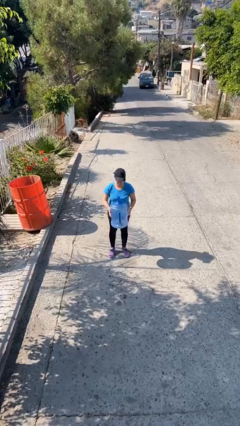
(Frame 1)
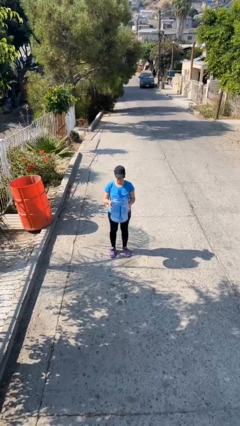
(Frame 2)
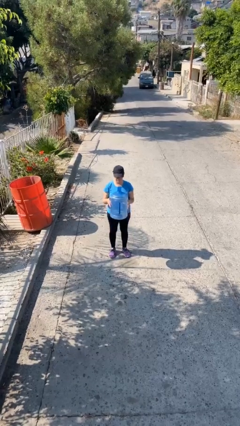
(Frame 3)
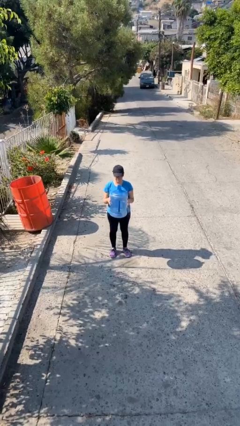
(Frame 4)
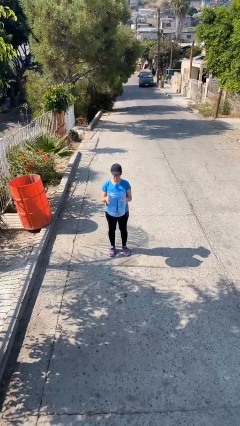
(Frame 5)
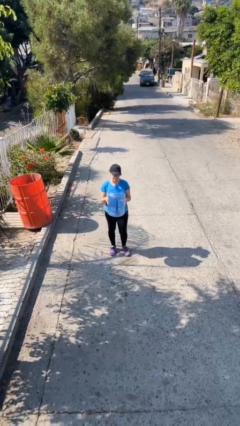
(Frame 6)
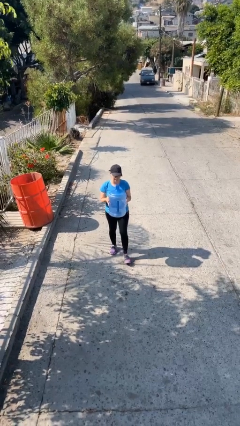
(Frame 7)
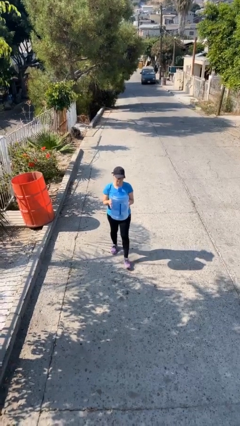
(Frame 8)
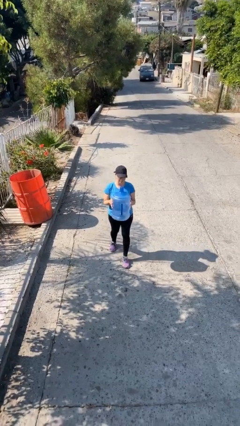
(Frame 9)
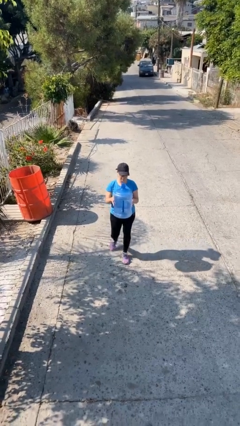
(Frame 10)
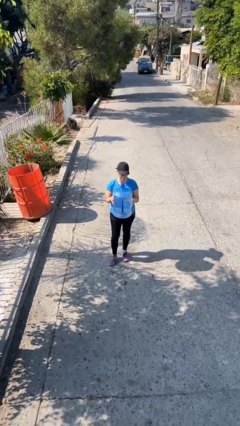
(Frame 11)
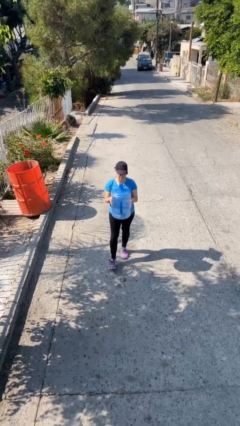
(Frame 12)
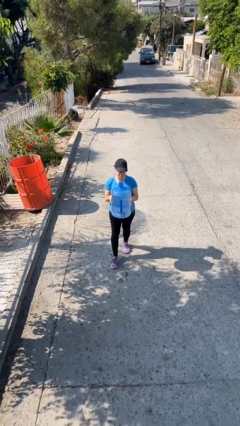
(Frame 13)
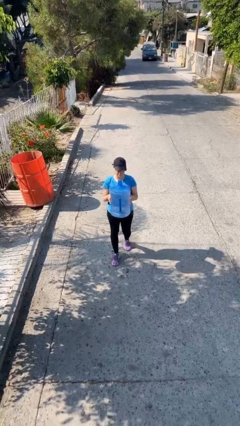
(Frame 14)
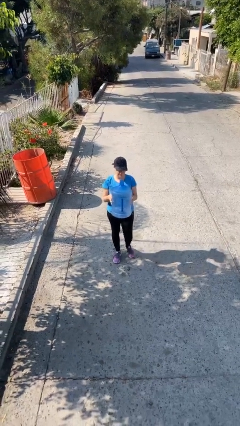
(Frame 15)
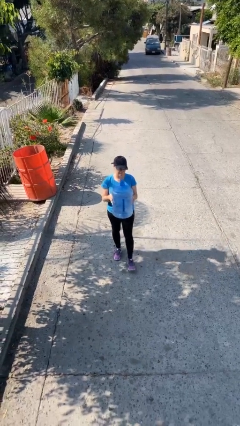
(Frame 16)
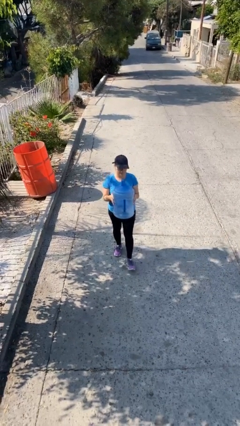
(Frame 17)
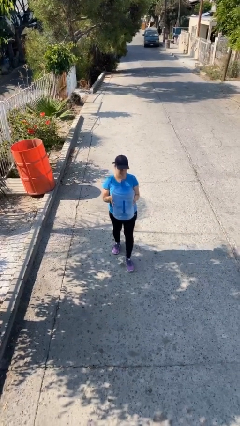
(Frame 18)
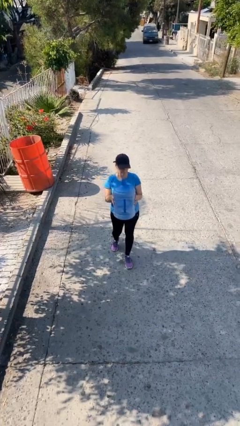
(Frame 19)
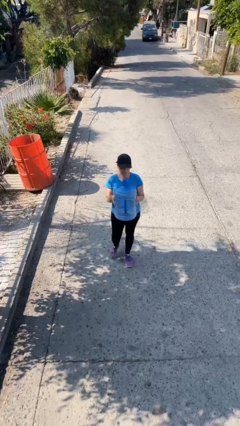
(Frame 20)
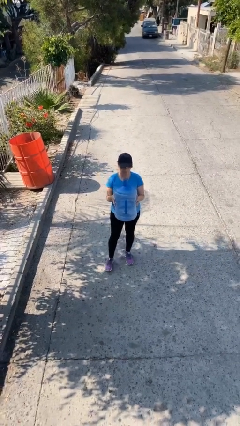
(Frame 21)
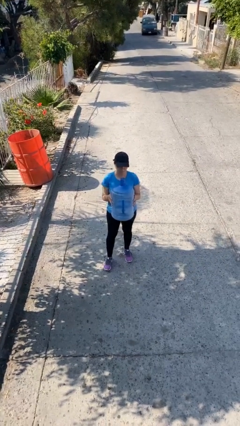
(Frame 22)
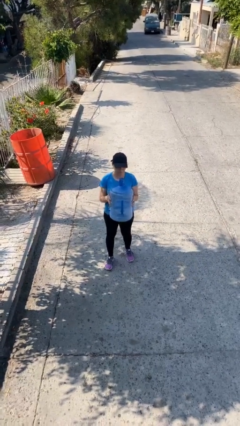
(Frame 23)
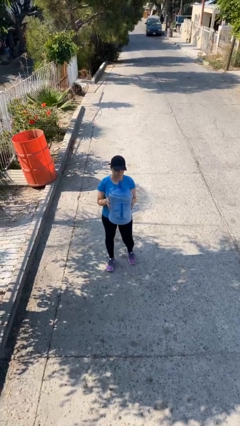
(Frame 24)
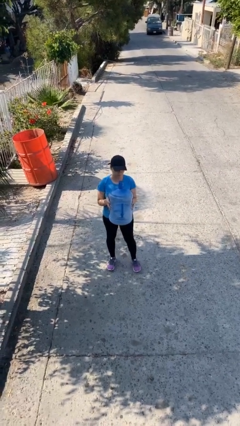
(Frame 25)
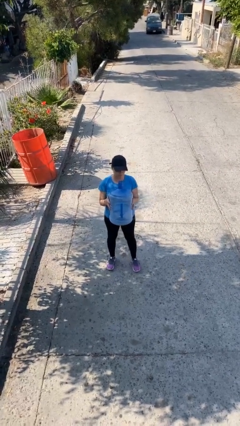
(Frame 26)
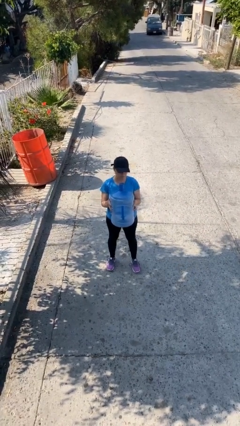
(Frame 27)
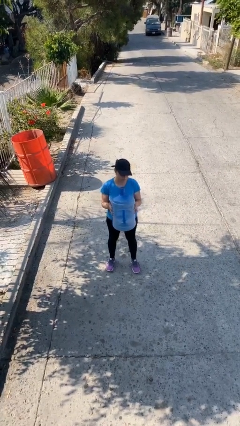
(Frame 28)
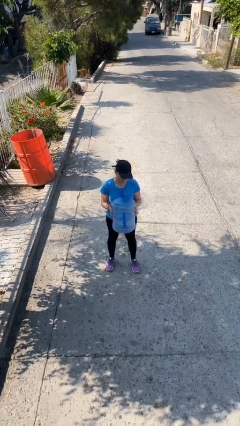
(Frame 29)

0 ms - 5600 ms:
person carries heavy object

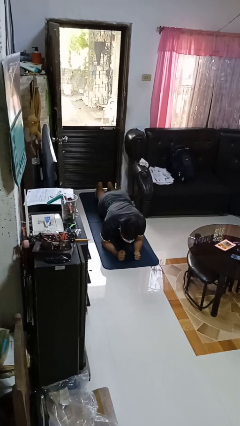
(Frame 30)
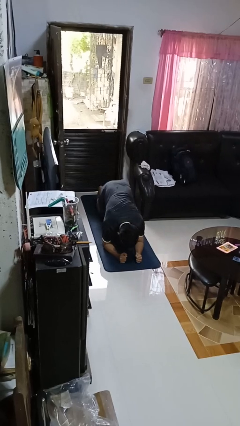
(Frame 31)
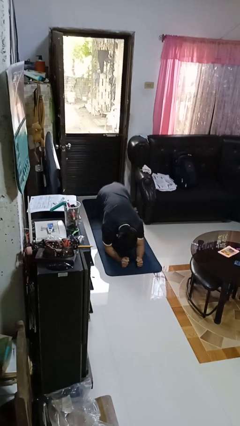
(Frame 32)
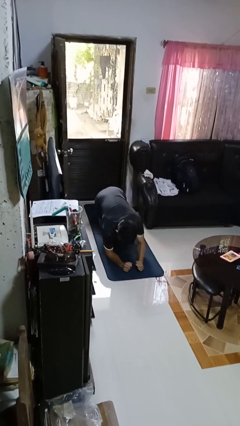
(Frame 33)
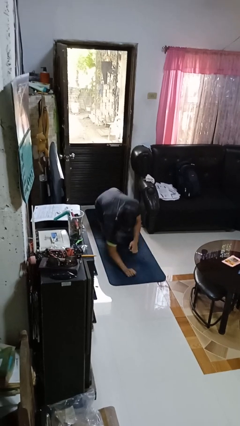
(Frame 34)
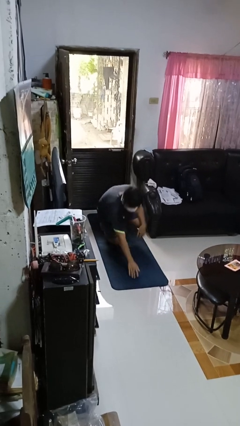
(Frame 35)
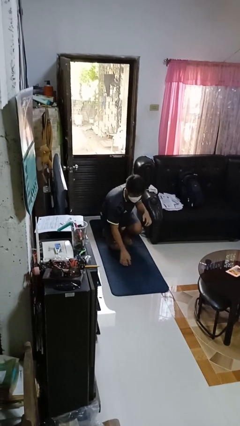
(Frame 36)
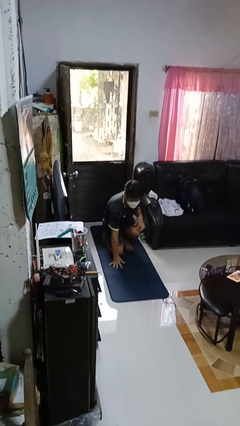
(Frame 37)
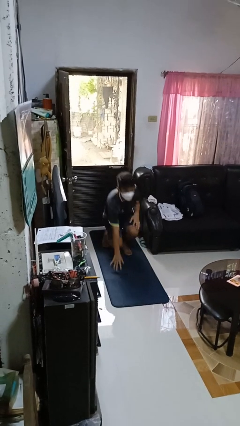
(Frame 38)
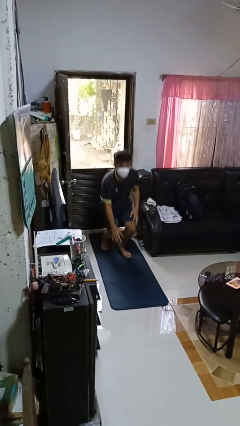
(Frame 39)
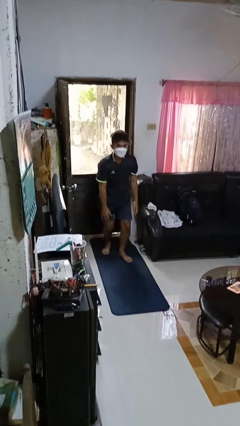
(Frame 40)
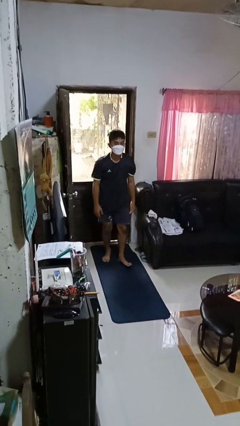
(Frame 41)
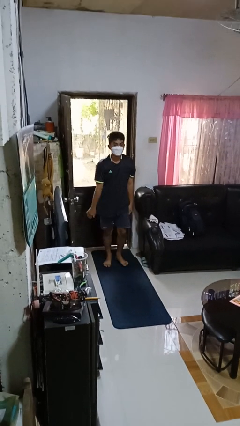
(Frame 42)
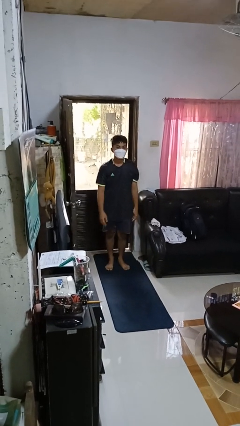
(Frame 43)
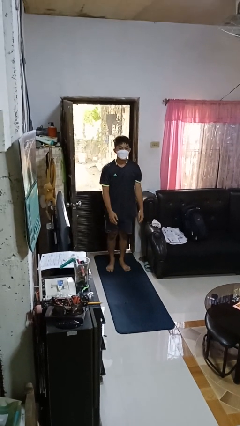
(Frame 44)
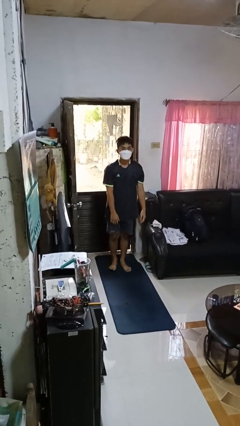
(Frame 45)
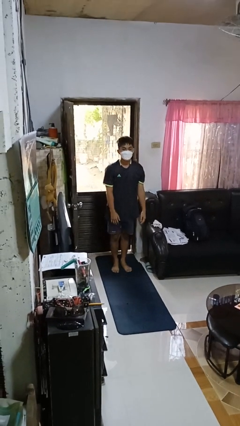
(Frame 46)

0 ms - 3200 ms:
person stands up from floor

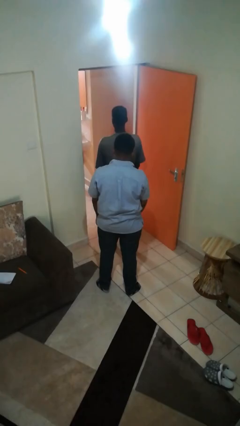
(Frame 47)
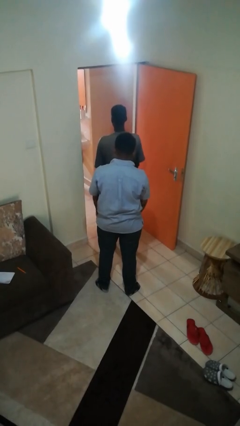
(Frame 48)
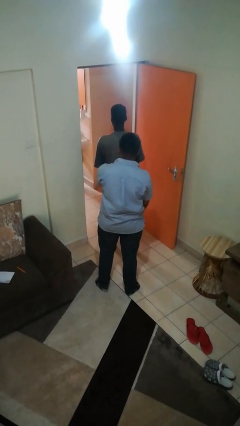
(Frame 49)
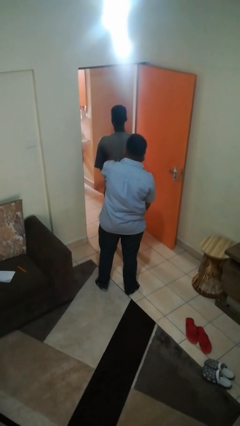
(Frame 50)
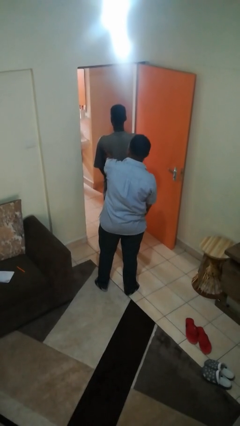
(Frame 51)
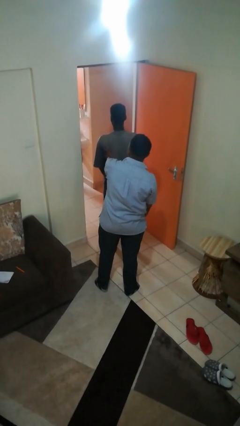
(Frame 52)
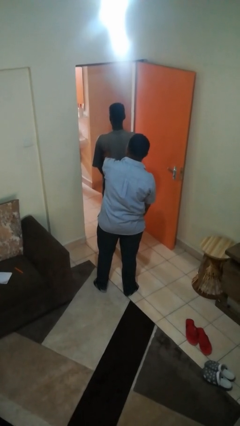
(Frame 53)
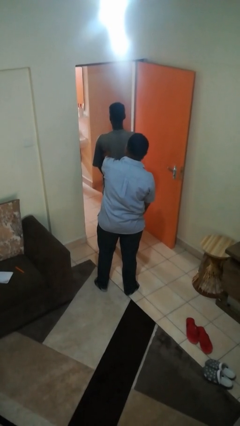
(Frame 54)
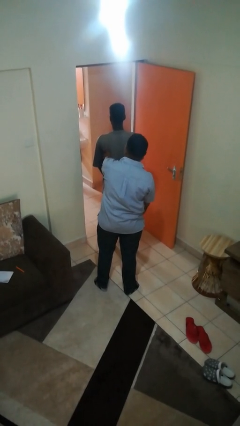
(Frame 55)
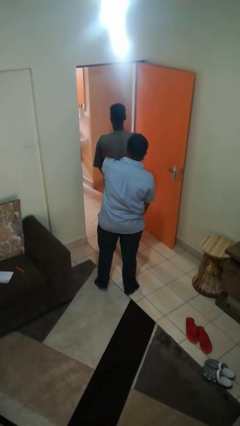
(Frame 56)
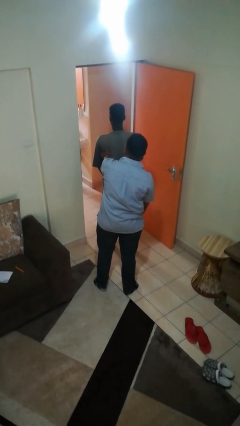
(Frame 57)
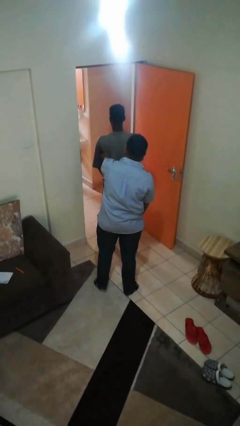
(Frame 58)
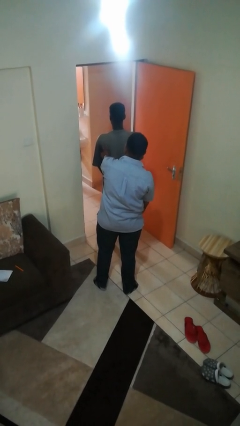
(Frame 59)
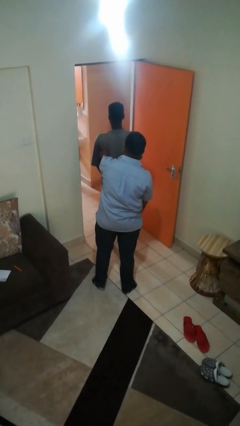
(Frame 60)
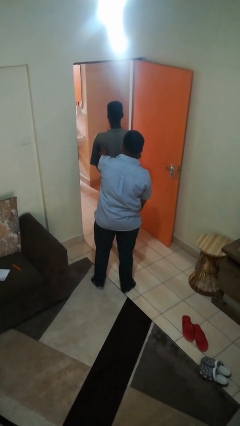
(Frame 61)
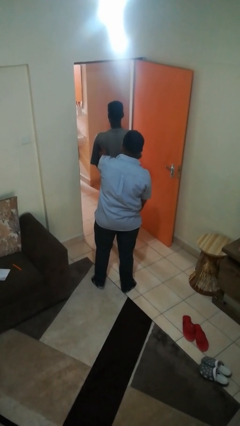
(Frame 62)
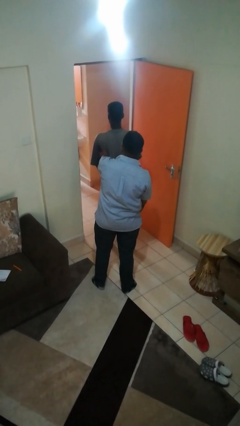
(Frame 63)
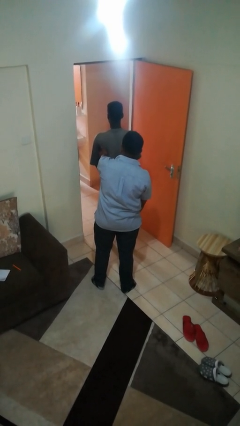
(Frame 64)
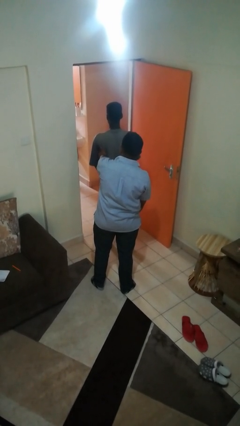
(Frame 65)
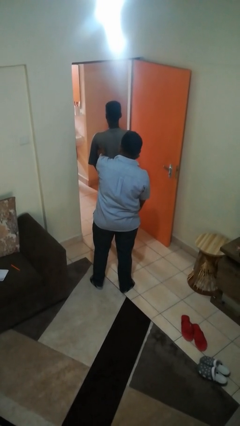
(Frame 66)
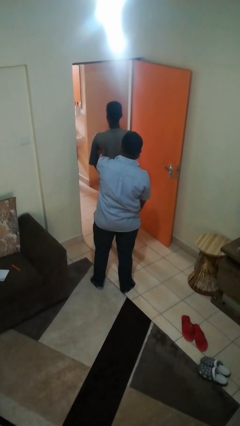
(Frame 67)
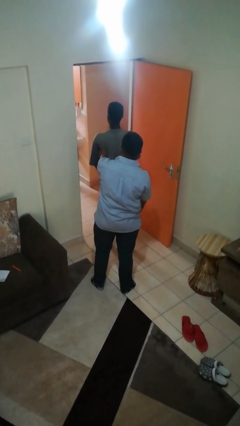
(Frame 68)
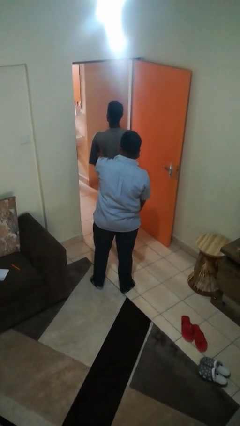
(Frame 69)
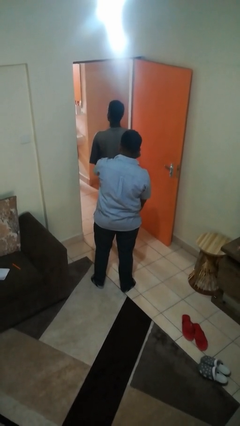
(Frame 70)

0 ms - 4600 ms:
person touches back of person

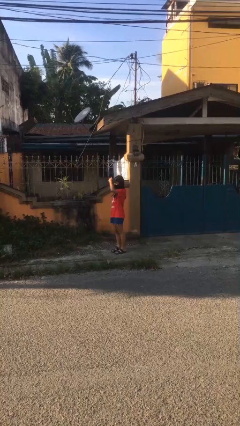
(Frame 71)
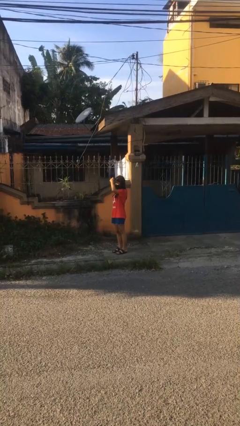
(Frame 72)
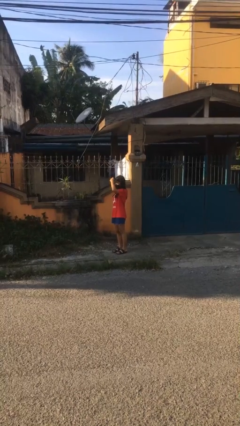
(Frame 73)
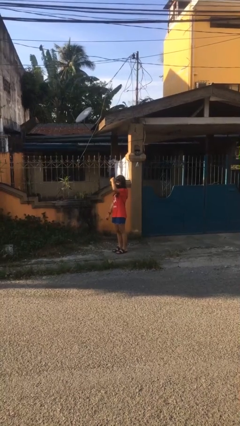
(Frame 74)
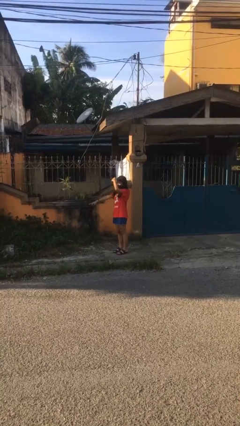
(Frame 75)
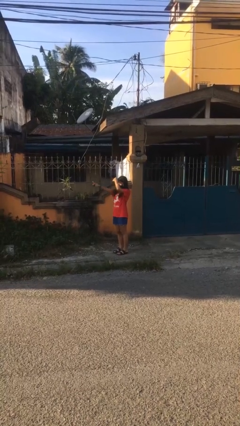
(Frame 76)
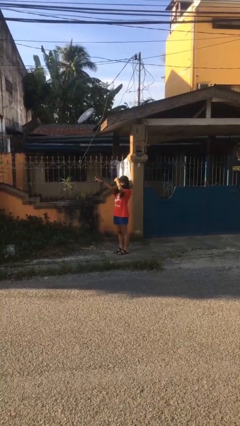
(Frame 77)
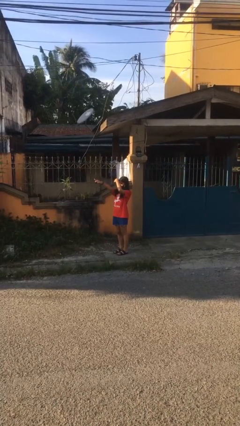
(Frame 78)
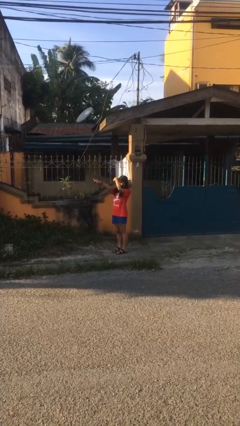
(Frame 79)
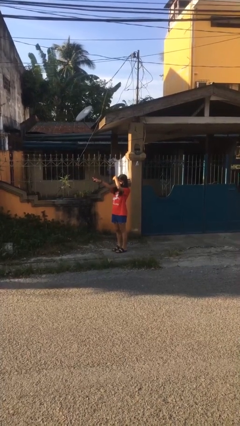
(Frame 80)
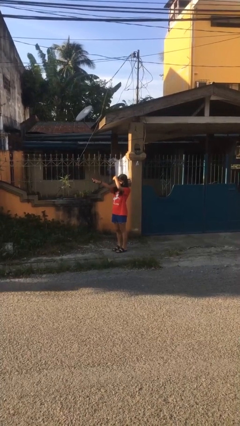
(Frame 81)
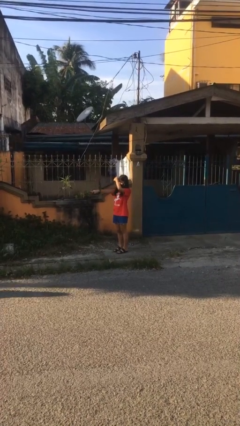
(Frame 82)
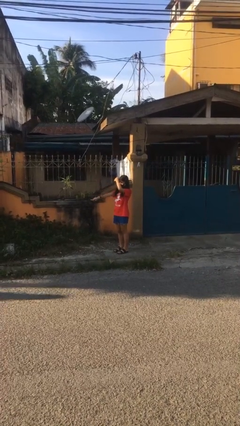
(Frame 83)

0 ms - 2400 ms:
person points at person

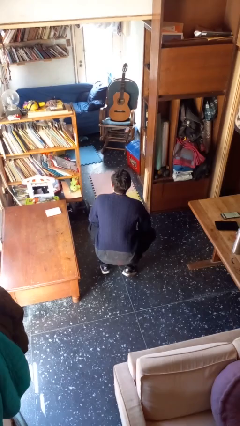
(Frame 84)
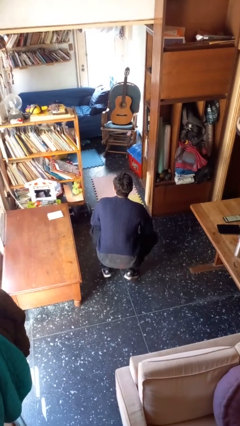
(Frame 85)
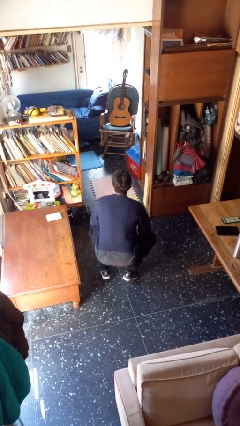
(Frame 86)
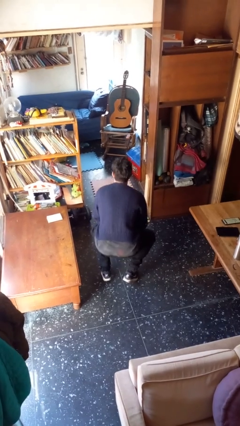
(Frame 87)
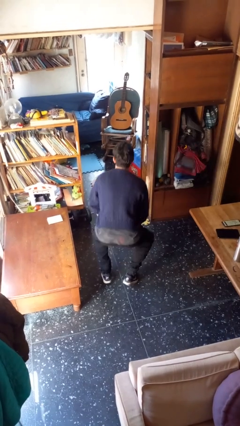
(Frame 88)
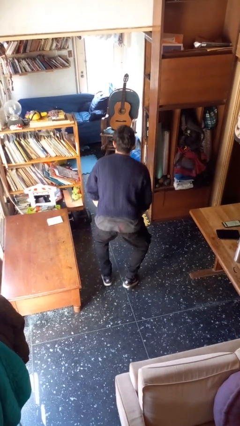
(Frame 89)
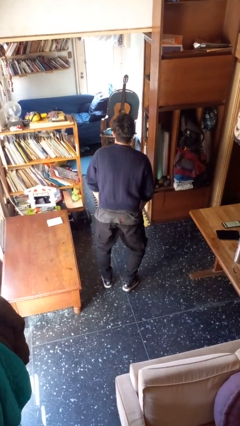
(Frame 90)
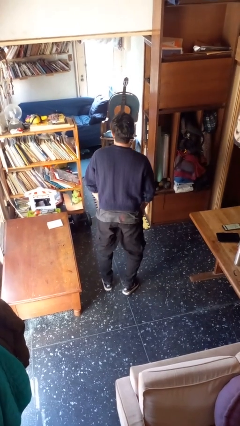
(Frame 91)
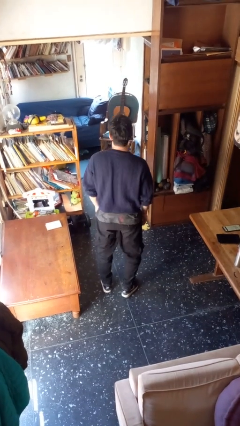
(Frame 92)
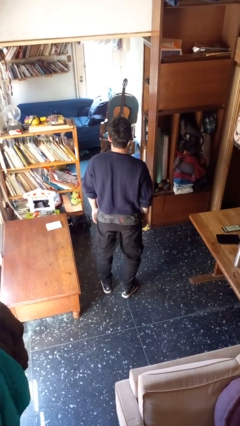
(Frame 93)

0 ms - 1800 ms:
person stands up

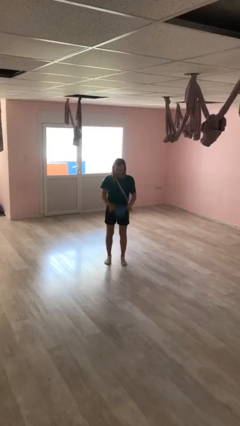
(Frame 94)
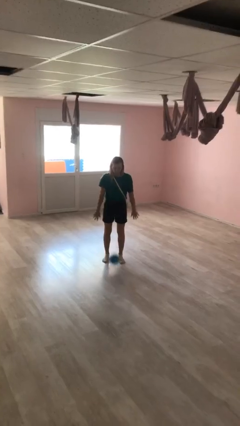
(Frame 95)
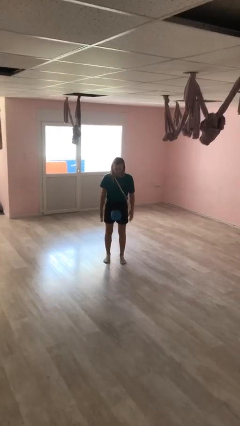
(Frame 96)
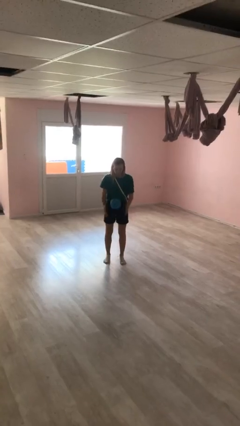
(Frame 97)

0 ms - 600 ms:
person bounces ball on floor
